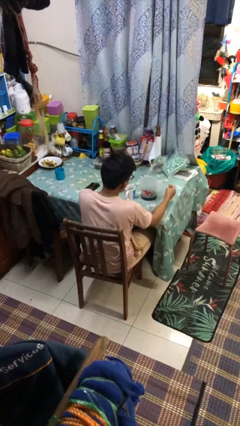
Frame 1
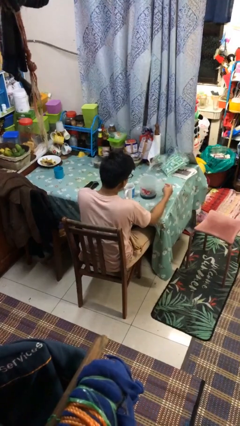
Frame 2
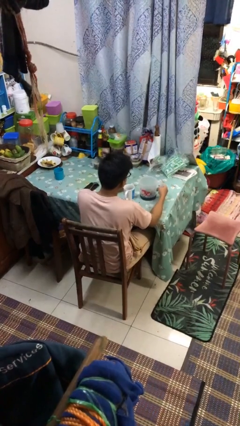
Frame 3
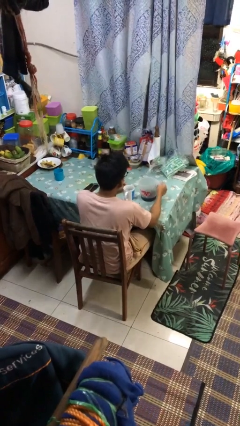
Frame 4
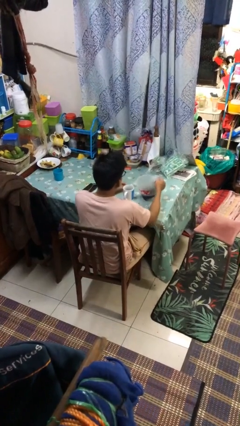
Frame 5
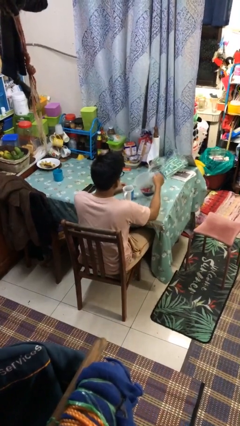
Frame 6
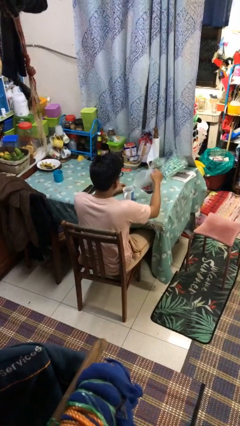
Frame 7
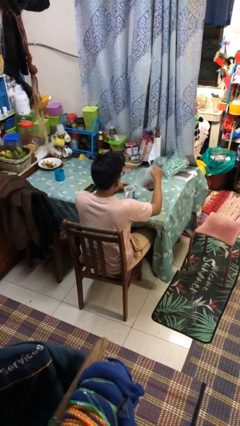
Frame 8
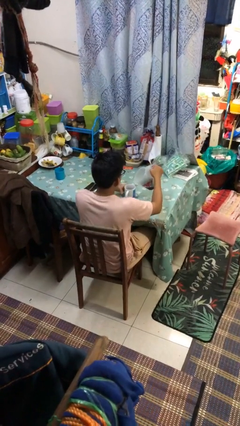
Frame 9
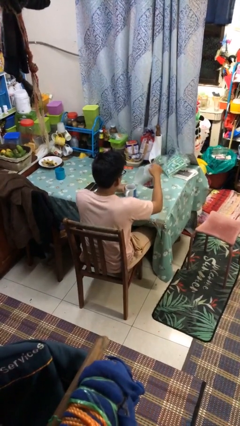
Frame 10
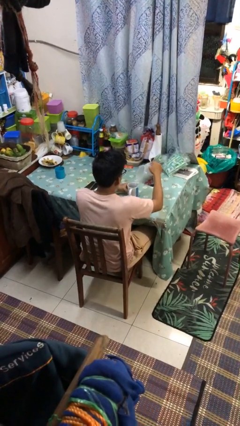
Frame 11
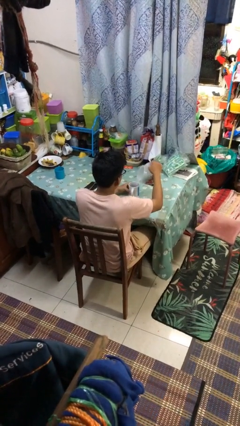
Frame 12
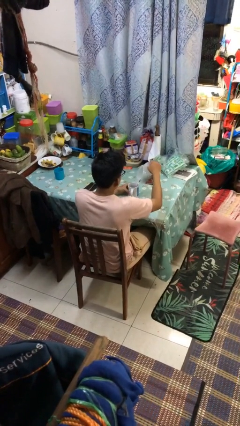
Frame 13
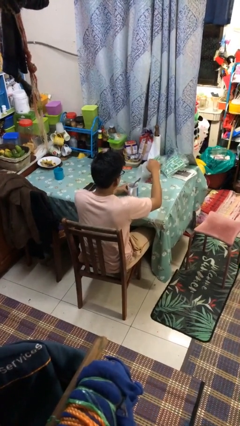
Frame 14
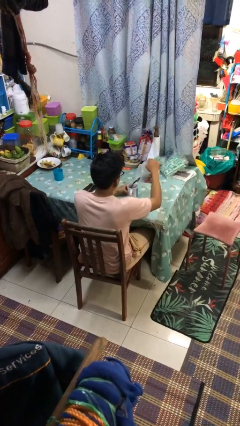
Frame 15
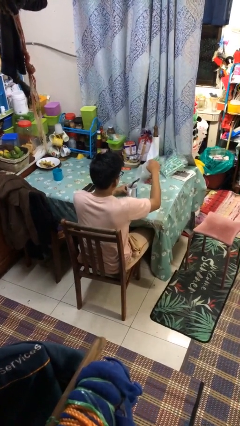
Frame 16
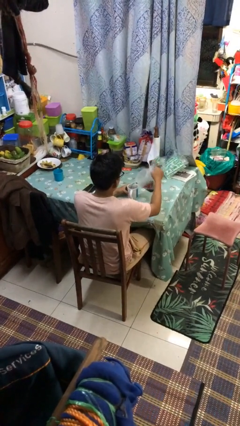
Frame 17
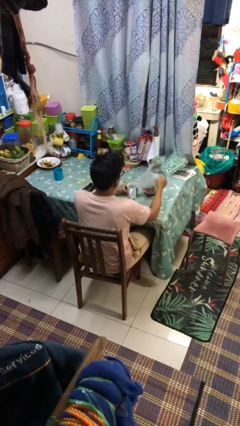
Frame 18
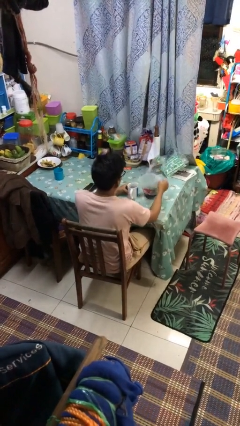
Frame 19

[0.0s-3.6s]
person pours coffee into mug

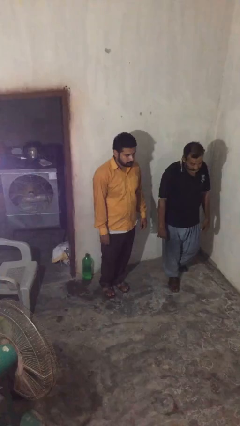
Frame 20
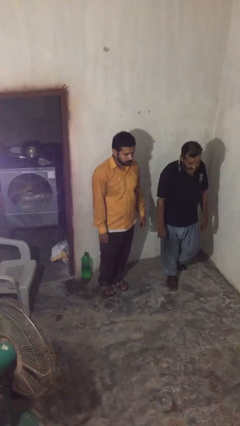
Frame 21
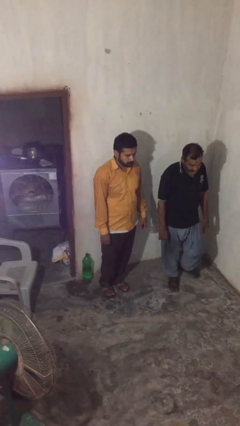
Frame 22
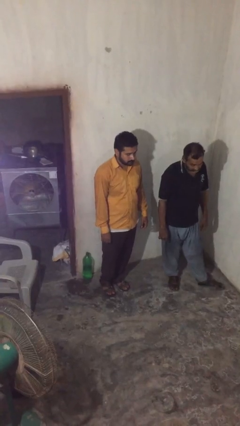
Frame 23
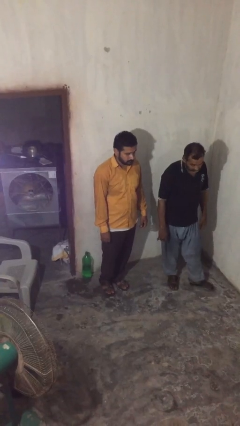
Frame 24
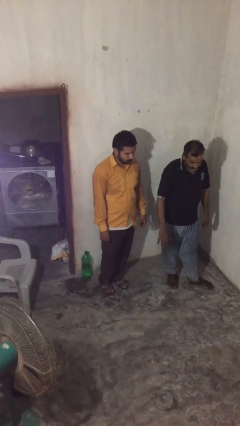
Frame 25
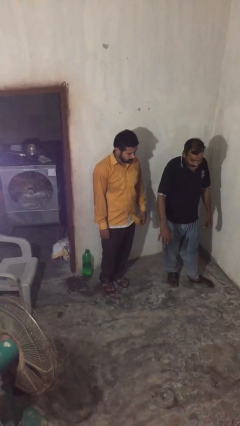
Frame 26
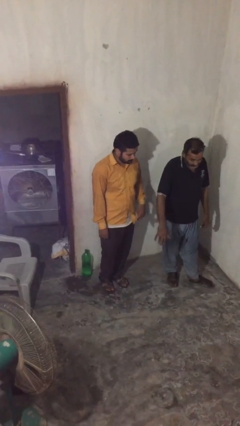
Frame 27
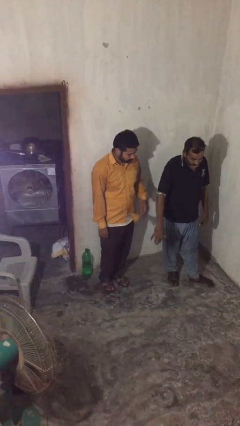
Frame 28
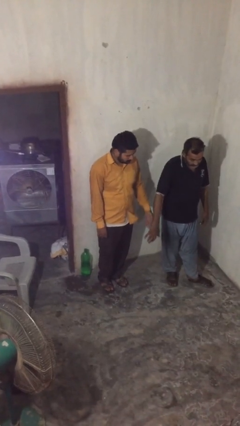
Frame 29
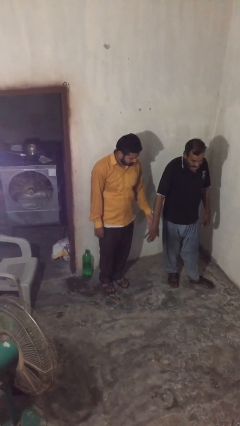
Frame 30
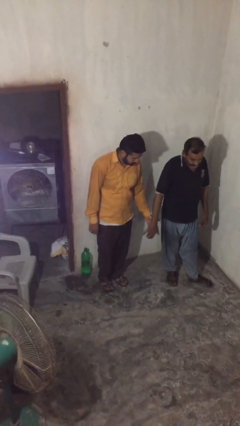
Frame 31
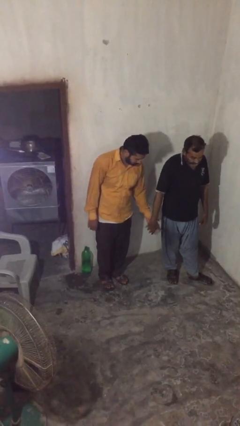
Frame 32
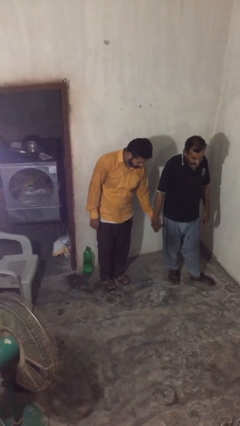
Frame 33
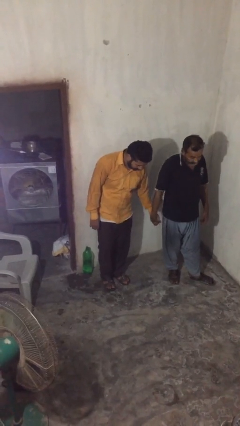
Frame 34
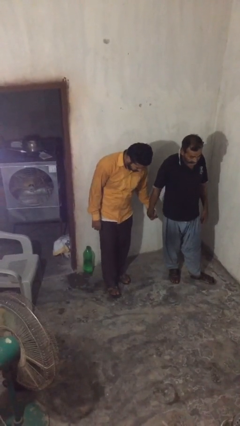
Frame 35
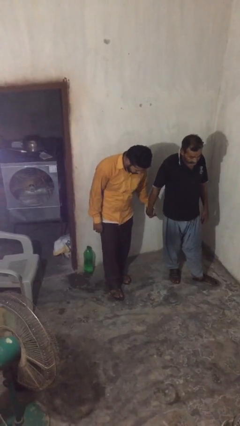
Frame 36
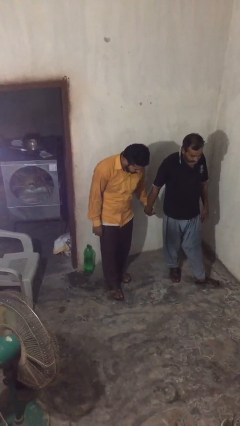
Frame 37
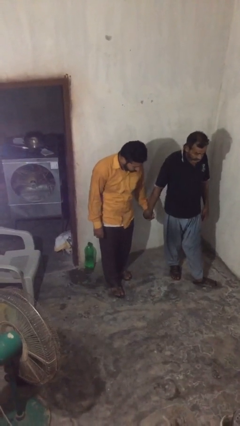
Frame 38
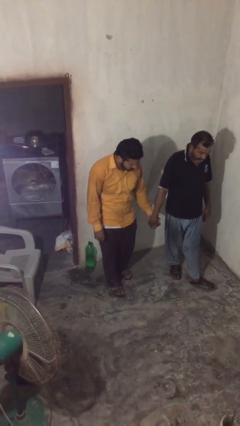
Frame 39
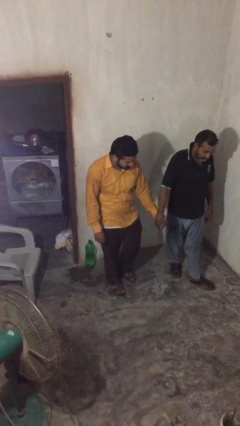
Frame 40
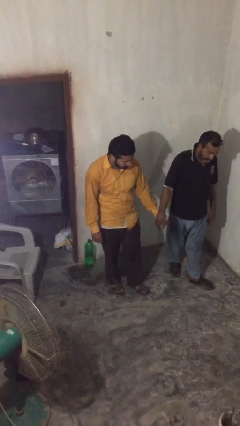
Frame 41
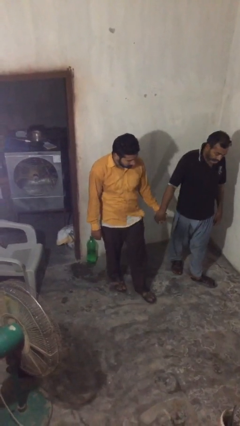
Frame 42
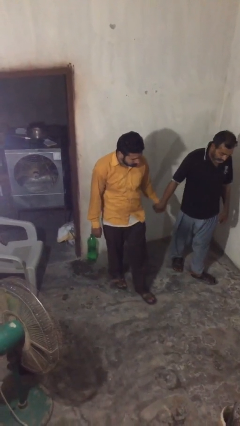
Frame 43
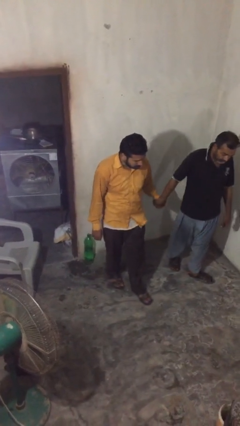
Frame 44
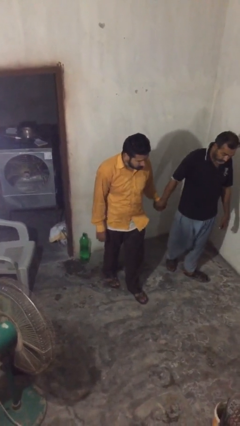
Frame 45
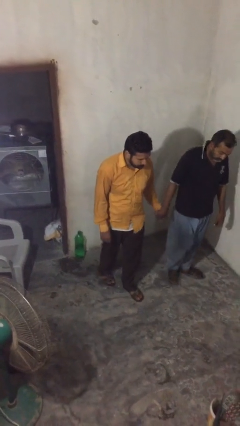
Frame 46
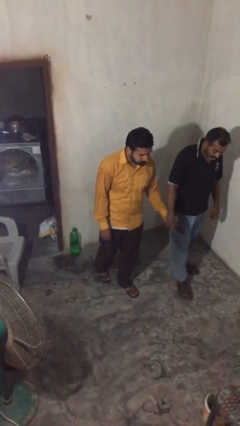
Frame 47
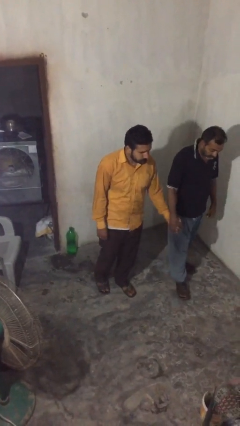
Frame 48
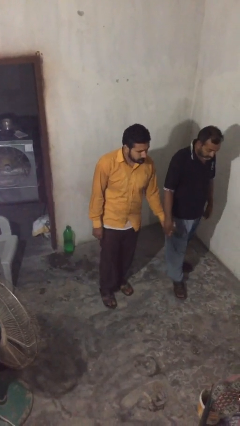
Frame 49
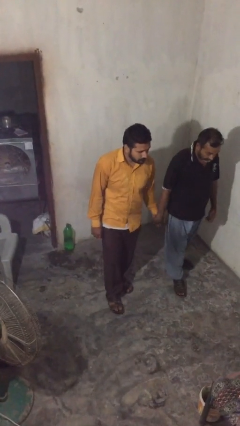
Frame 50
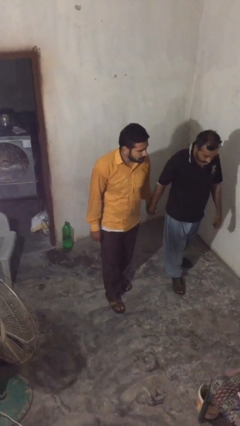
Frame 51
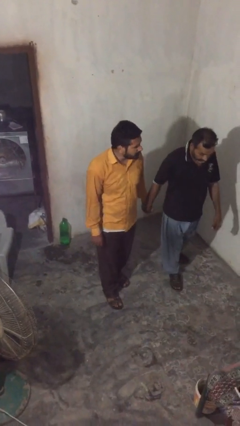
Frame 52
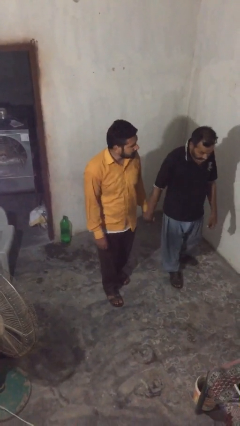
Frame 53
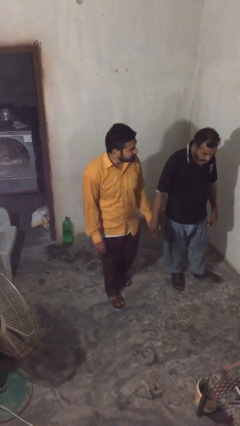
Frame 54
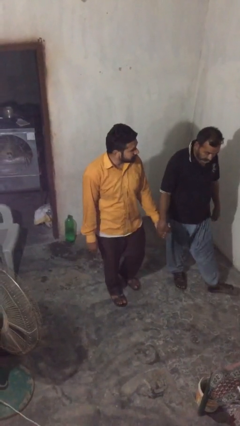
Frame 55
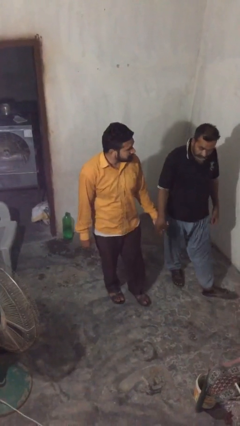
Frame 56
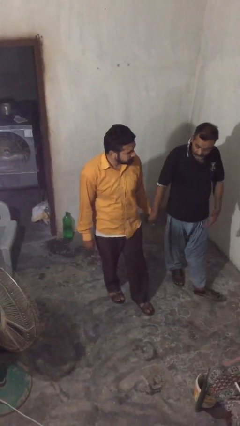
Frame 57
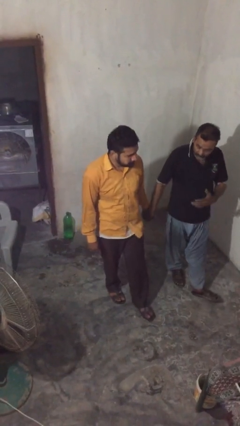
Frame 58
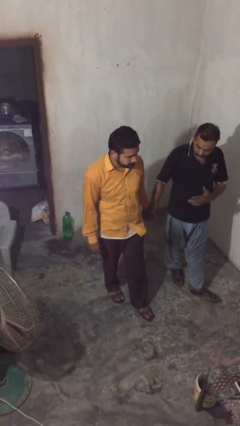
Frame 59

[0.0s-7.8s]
person holds hand

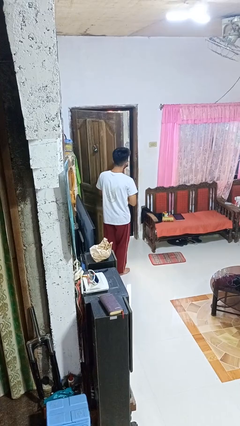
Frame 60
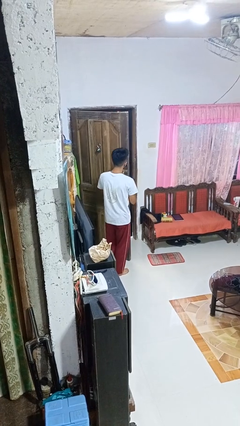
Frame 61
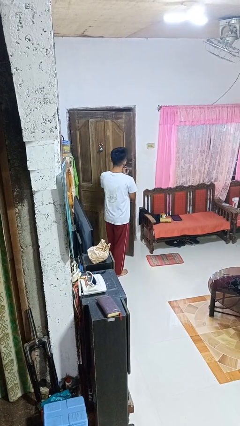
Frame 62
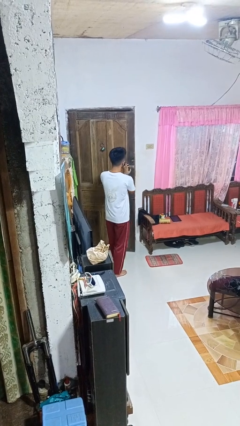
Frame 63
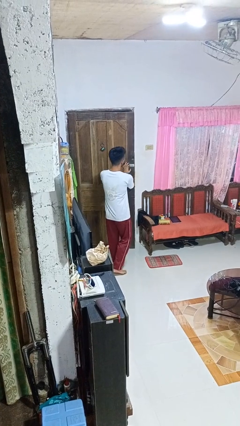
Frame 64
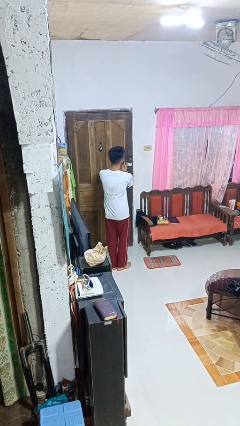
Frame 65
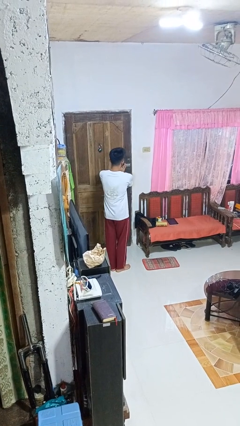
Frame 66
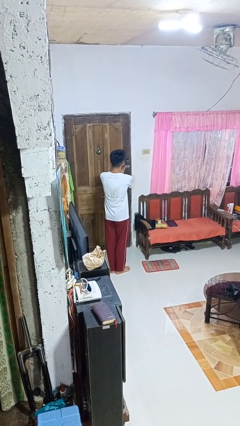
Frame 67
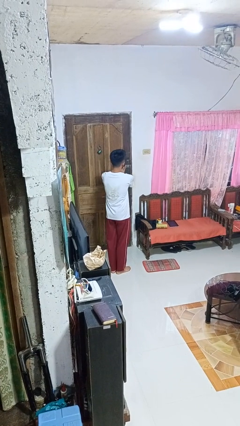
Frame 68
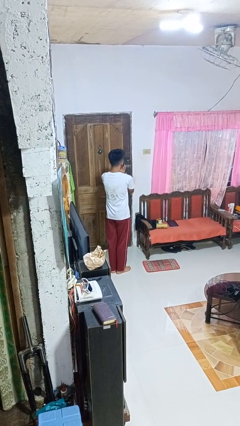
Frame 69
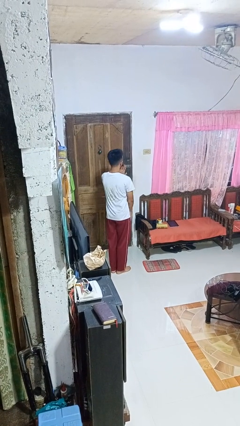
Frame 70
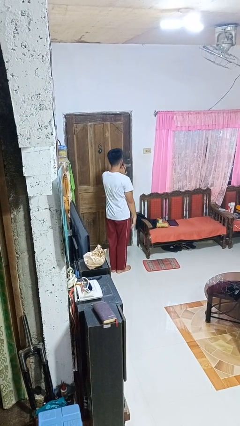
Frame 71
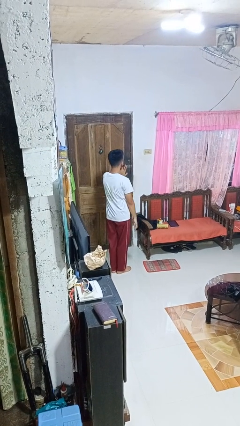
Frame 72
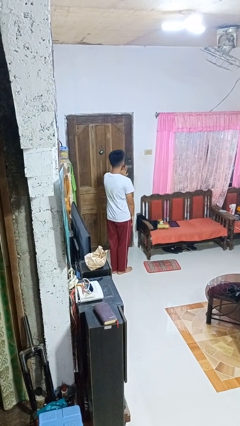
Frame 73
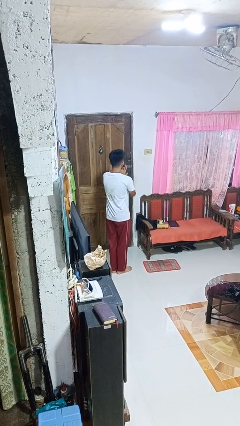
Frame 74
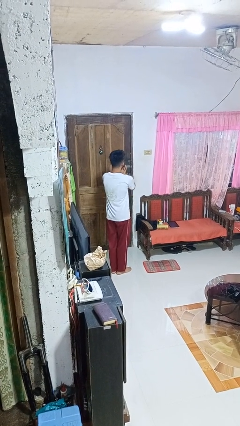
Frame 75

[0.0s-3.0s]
person closes facility door

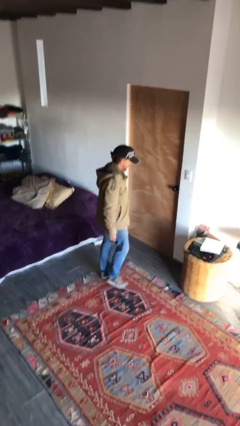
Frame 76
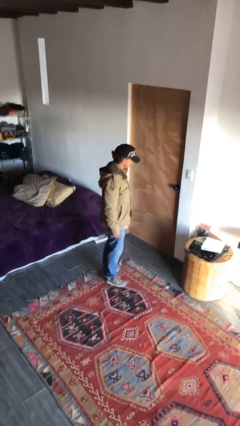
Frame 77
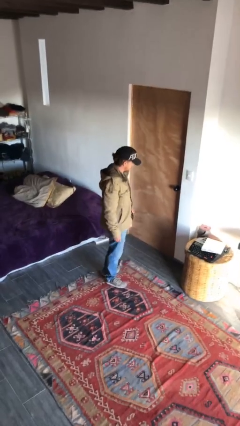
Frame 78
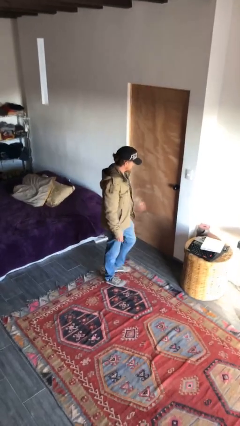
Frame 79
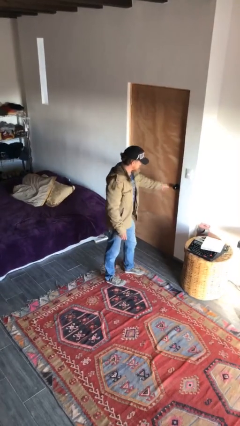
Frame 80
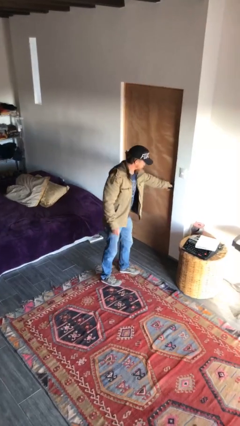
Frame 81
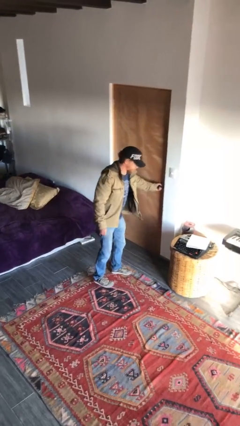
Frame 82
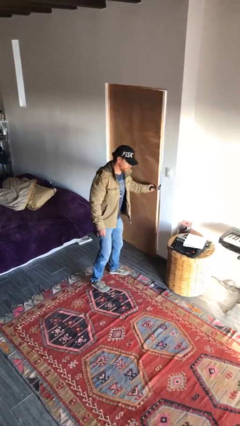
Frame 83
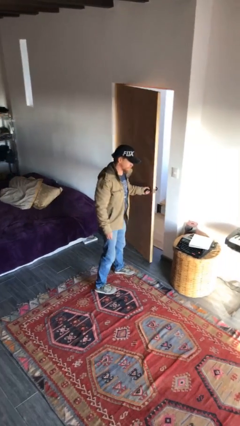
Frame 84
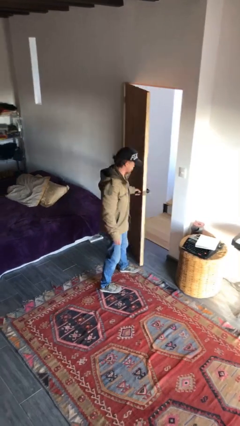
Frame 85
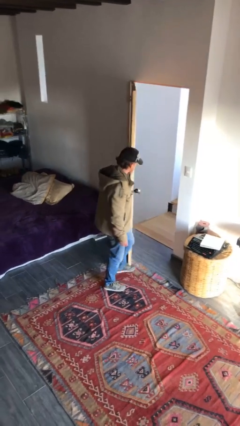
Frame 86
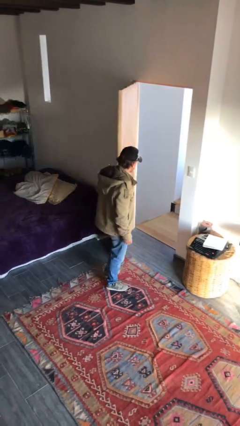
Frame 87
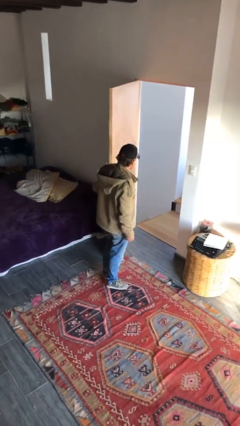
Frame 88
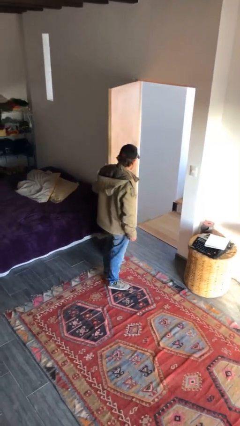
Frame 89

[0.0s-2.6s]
person opens facility door

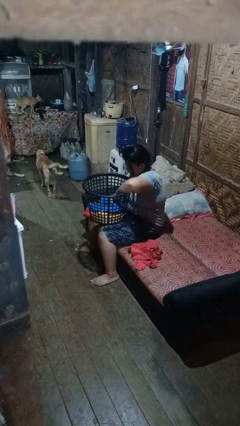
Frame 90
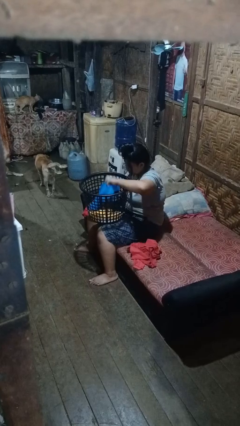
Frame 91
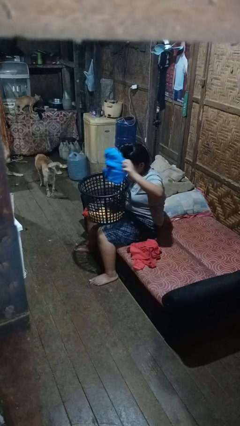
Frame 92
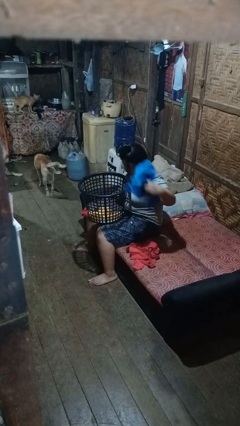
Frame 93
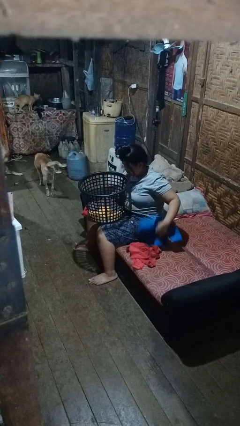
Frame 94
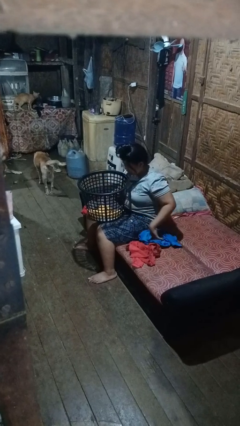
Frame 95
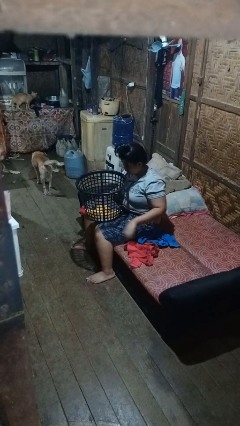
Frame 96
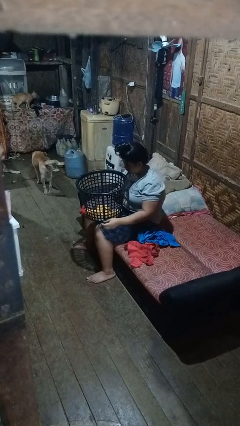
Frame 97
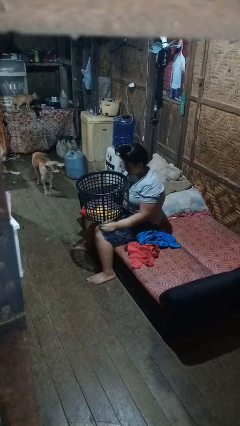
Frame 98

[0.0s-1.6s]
person takes object from basket
